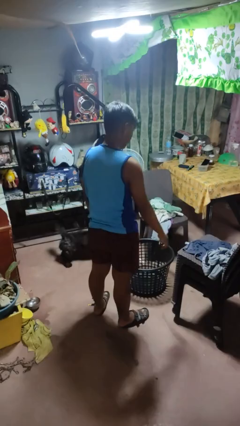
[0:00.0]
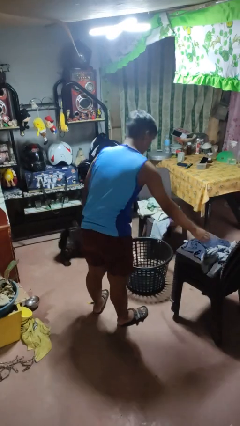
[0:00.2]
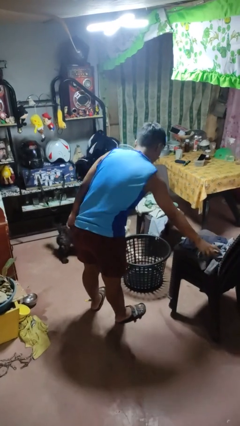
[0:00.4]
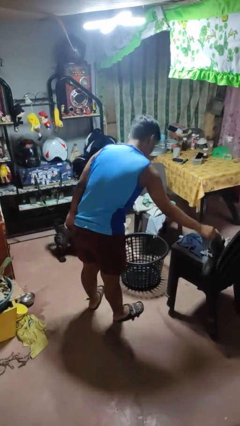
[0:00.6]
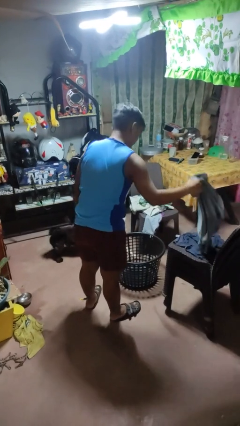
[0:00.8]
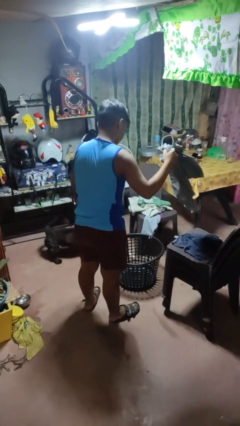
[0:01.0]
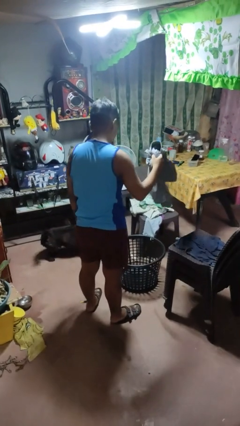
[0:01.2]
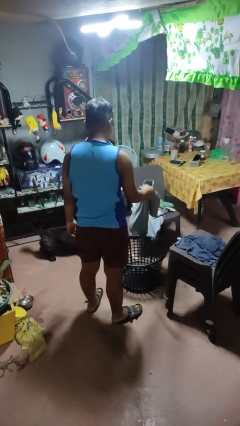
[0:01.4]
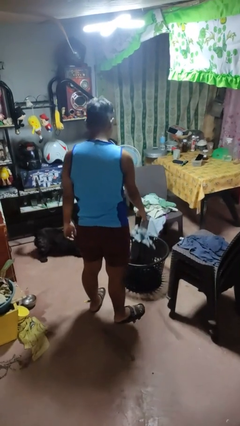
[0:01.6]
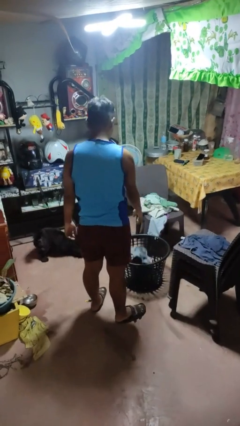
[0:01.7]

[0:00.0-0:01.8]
person puts object into basket

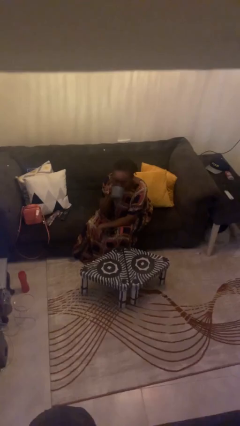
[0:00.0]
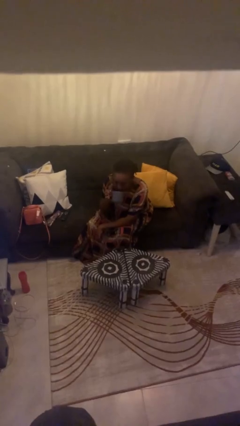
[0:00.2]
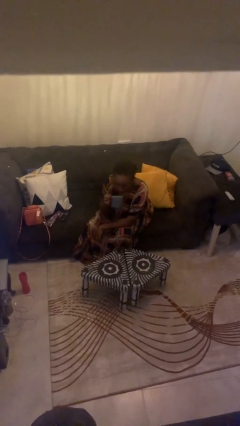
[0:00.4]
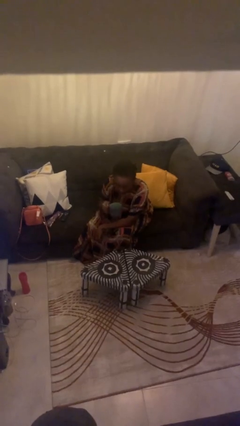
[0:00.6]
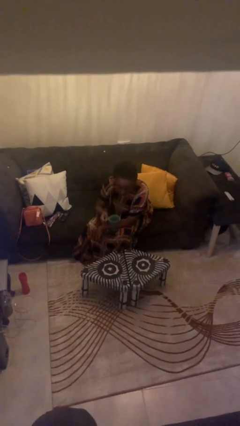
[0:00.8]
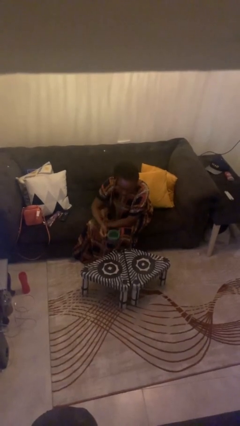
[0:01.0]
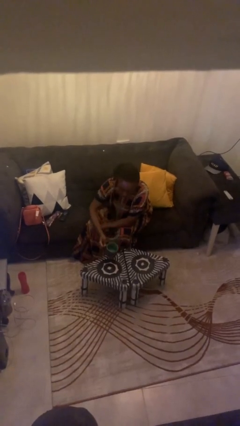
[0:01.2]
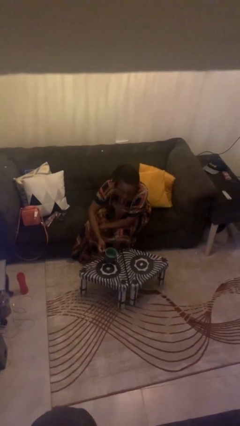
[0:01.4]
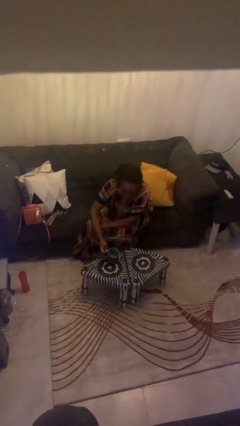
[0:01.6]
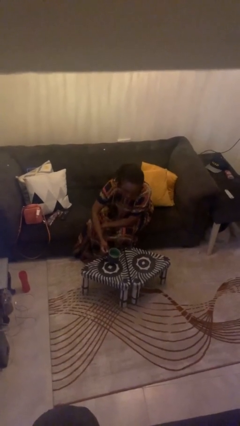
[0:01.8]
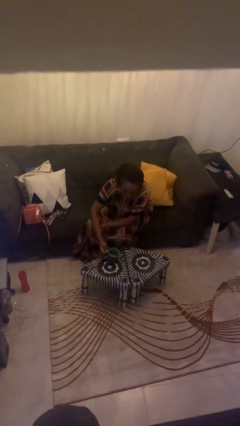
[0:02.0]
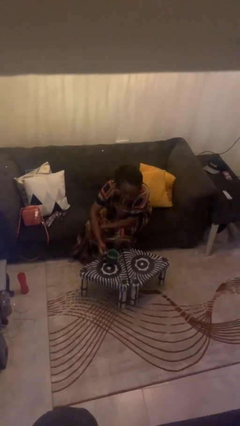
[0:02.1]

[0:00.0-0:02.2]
person puts down object on table

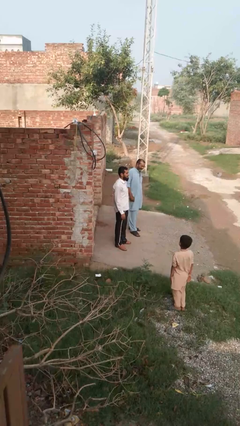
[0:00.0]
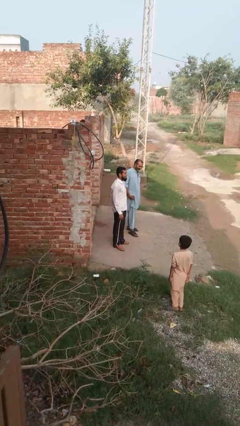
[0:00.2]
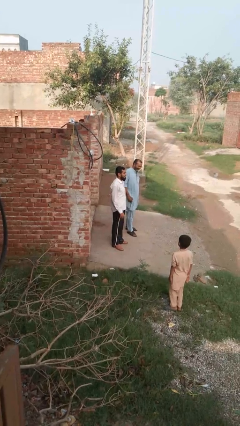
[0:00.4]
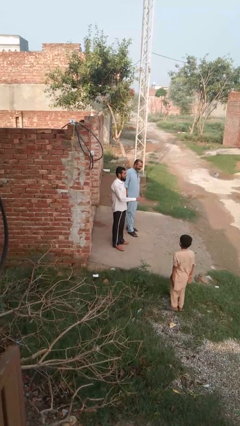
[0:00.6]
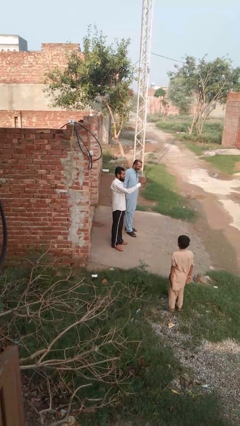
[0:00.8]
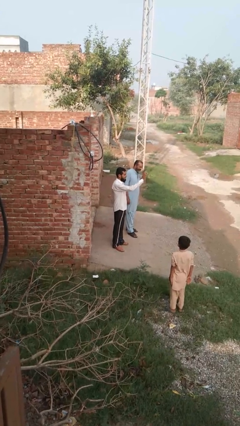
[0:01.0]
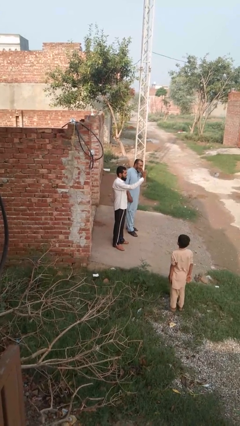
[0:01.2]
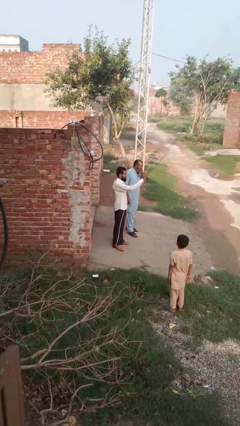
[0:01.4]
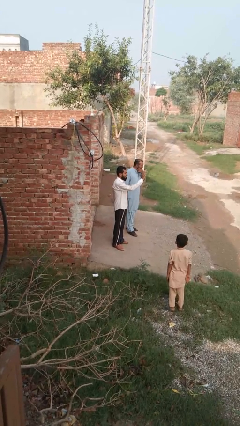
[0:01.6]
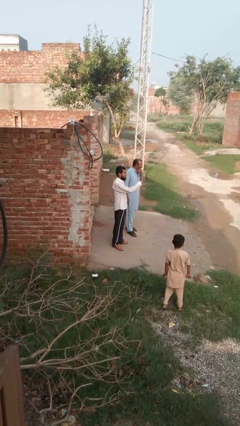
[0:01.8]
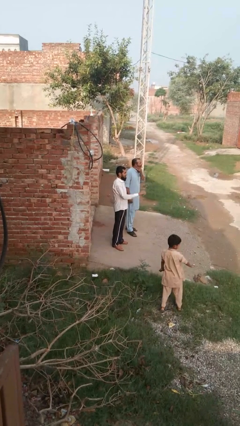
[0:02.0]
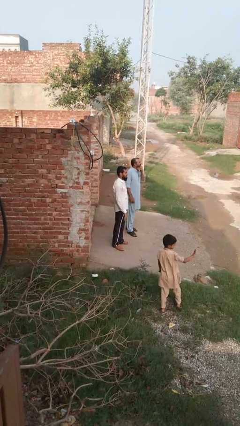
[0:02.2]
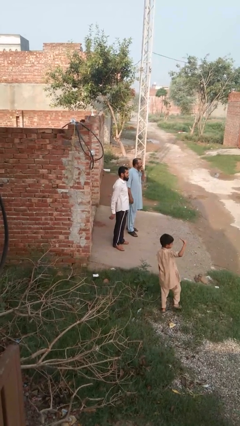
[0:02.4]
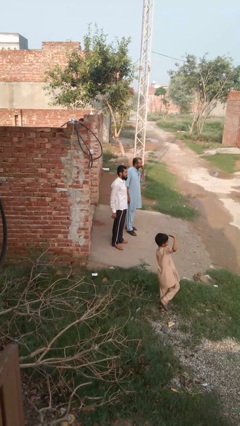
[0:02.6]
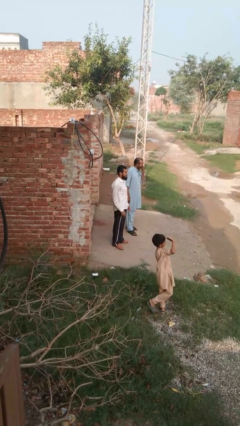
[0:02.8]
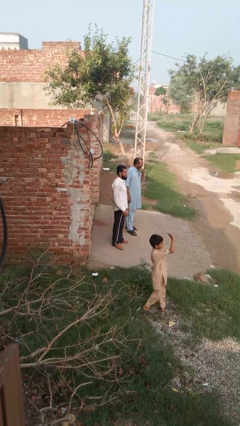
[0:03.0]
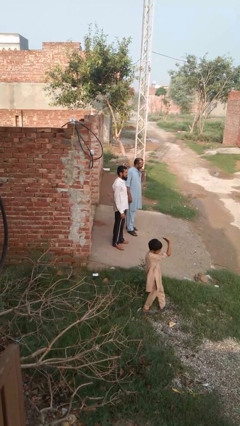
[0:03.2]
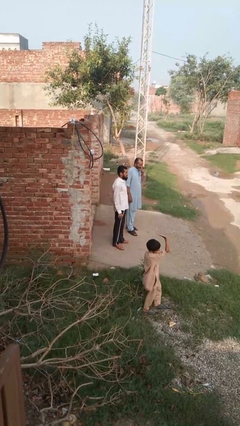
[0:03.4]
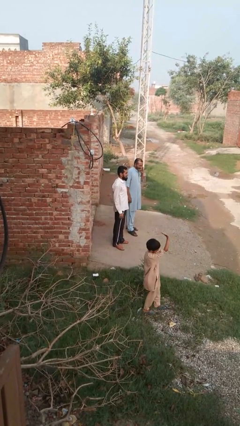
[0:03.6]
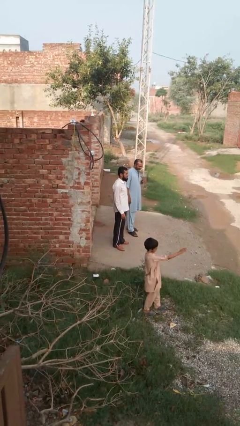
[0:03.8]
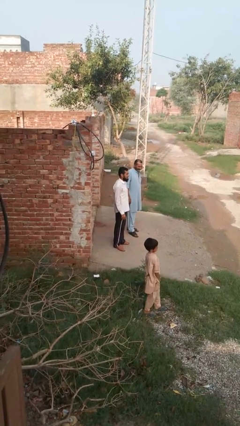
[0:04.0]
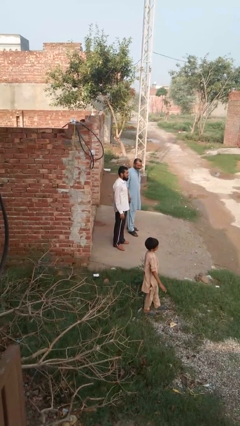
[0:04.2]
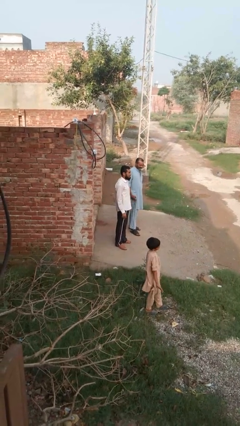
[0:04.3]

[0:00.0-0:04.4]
person waves at person

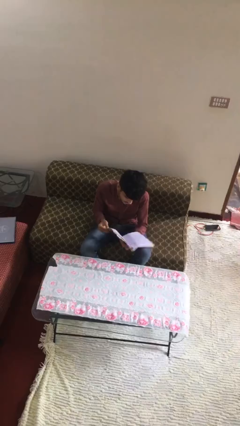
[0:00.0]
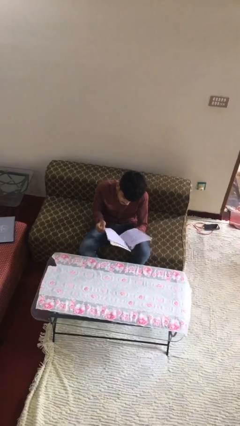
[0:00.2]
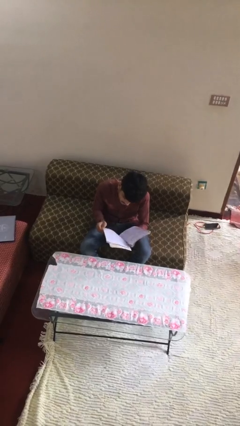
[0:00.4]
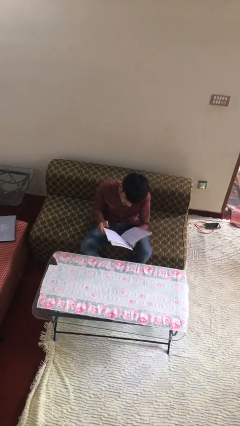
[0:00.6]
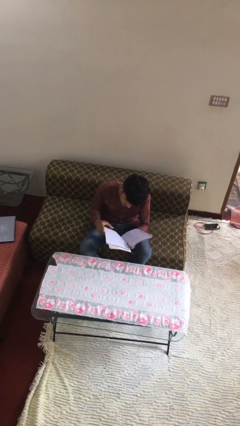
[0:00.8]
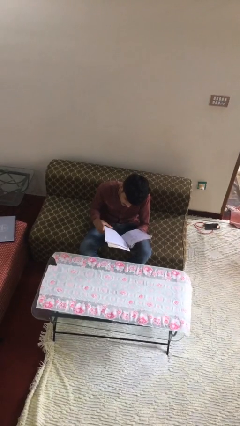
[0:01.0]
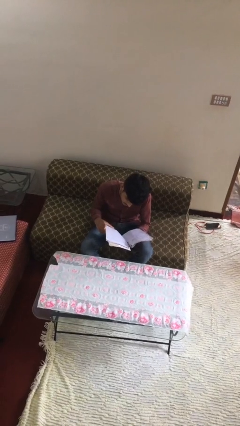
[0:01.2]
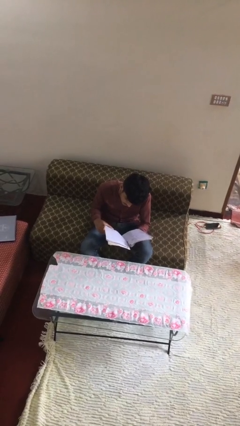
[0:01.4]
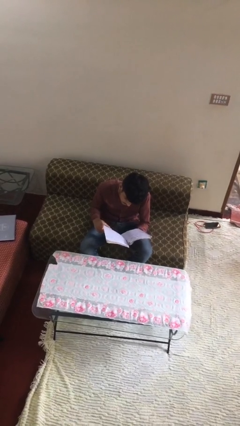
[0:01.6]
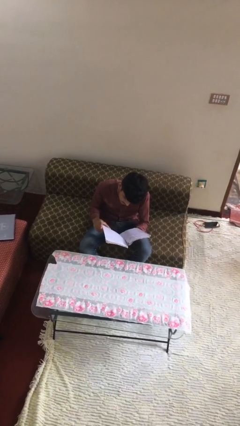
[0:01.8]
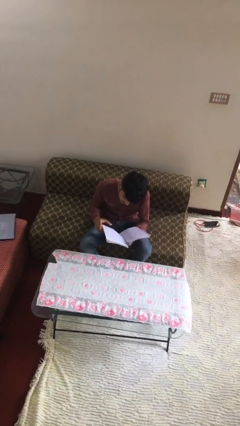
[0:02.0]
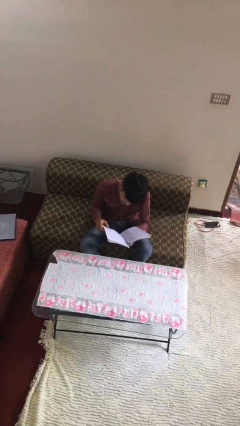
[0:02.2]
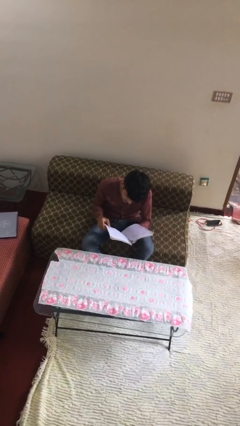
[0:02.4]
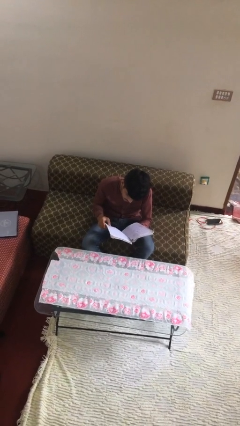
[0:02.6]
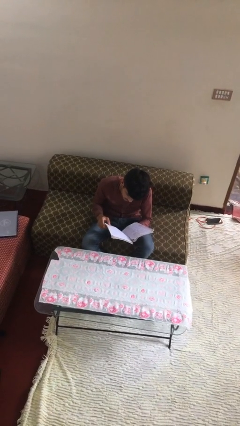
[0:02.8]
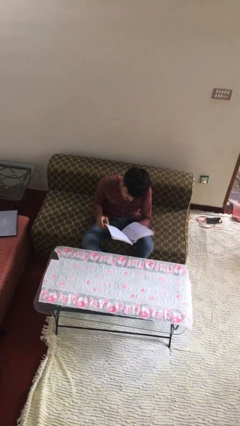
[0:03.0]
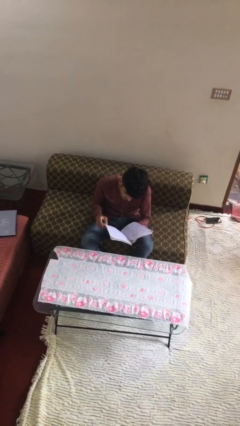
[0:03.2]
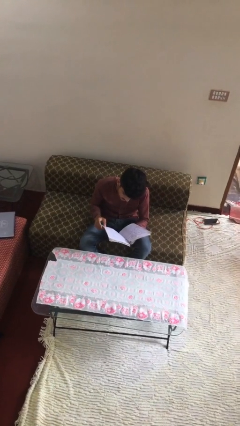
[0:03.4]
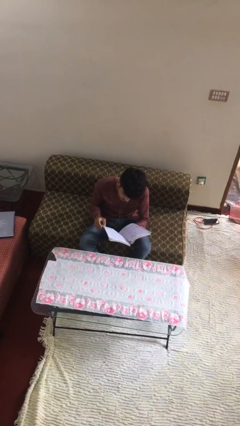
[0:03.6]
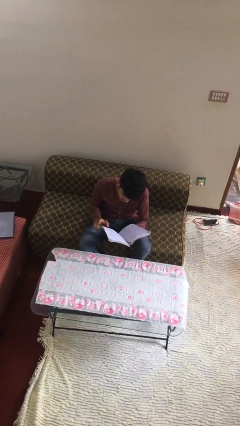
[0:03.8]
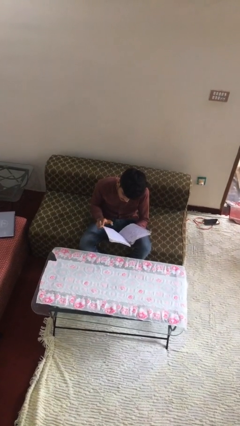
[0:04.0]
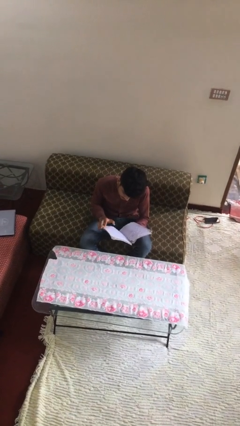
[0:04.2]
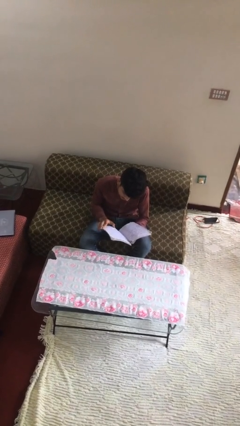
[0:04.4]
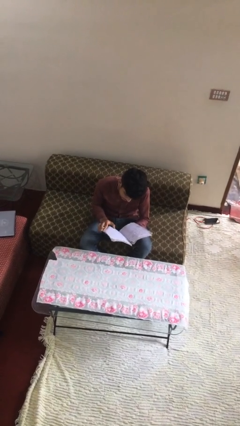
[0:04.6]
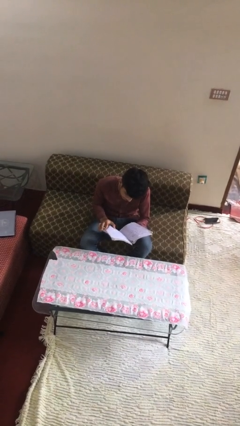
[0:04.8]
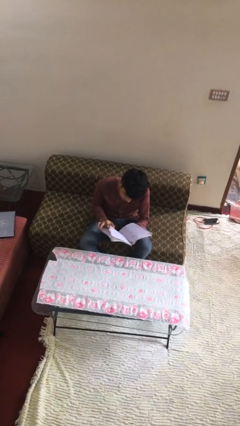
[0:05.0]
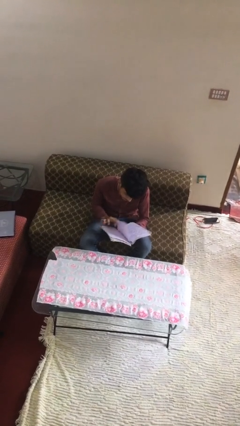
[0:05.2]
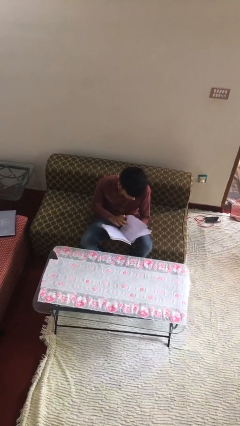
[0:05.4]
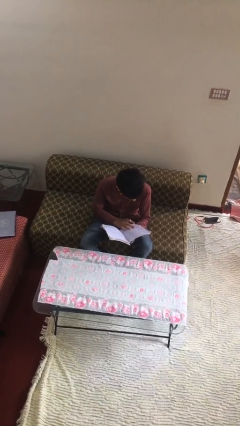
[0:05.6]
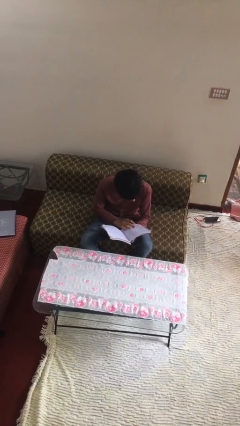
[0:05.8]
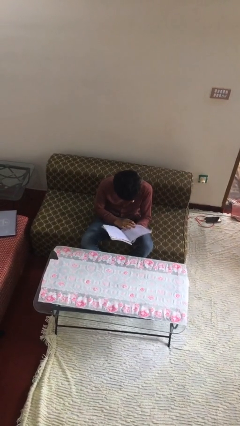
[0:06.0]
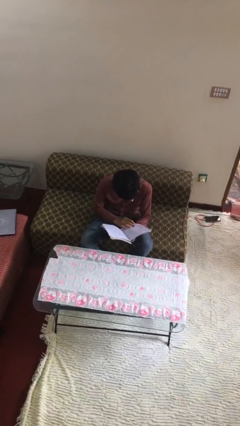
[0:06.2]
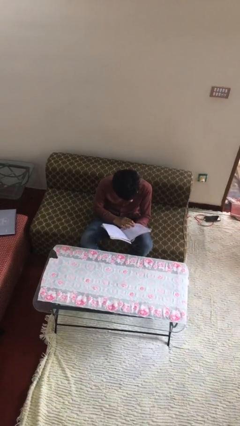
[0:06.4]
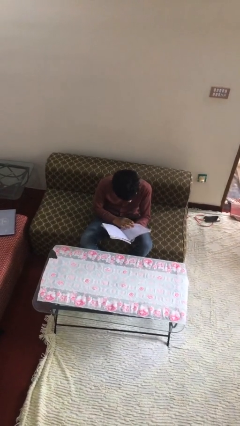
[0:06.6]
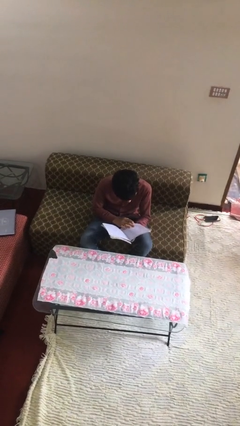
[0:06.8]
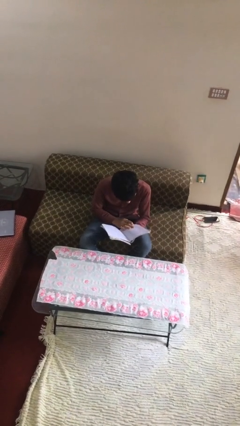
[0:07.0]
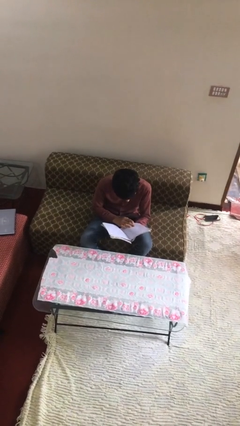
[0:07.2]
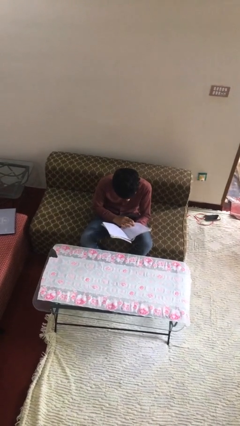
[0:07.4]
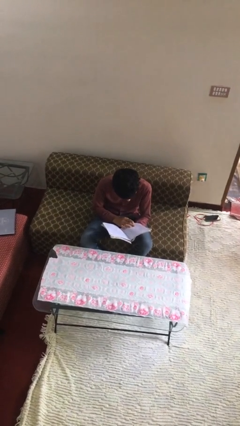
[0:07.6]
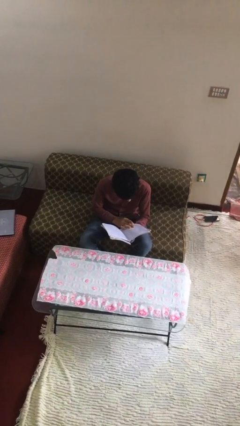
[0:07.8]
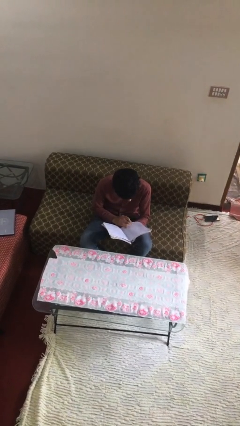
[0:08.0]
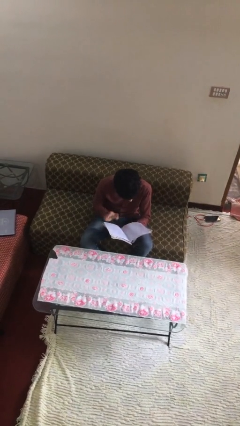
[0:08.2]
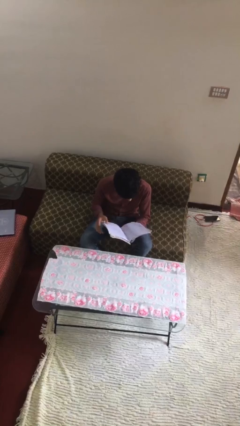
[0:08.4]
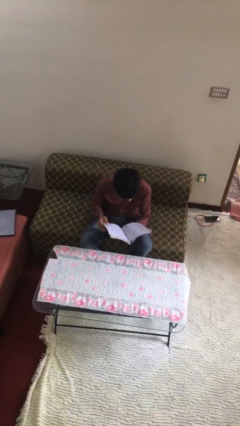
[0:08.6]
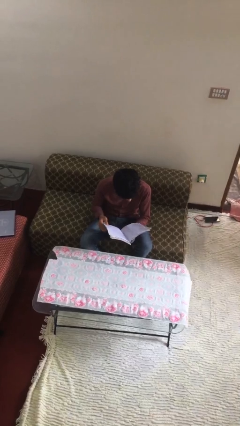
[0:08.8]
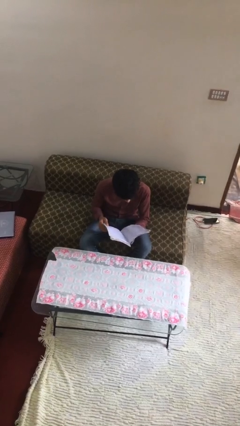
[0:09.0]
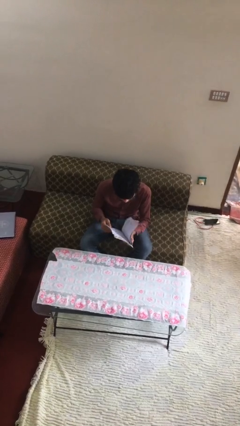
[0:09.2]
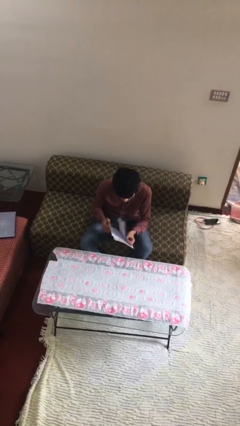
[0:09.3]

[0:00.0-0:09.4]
person reads document
